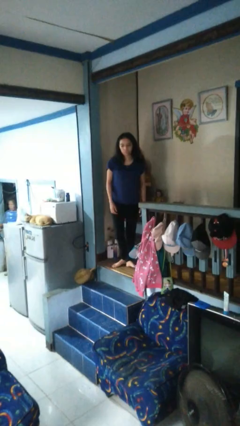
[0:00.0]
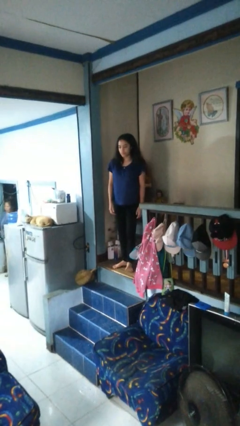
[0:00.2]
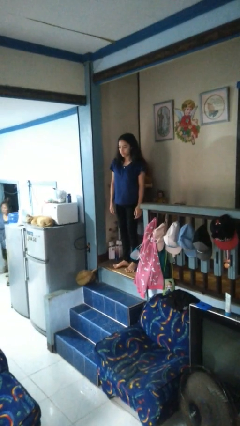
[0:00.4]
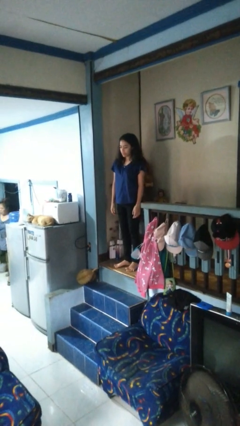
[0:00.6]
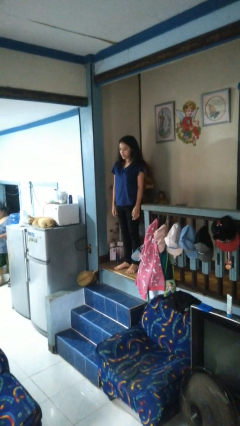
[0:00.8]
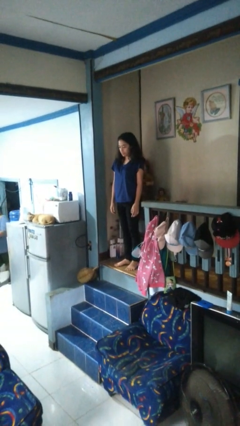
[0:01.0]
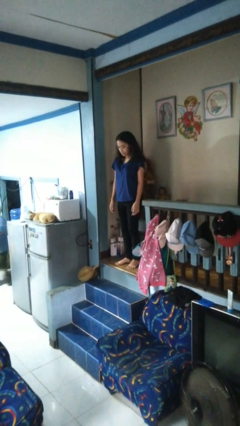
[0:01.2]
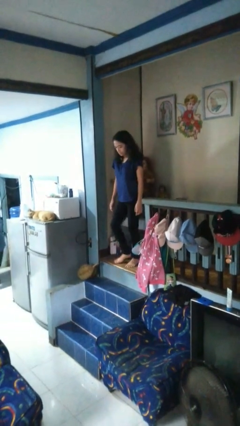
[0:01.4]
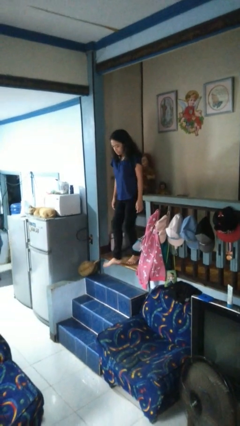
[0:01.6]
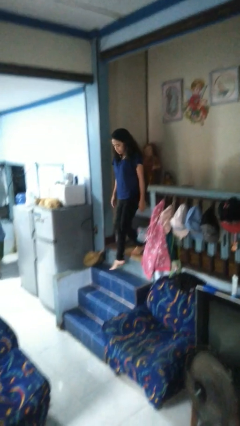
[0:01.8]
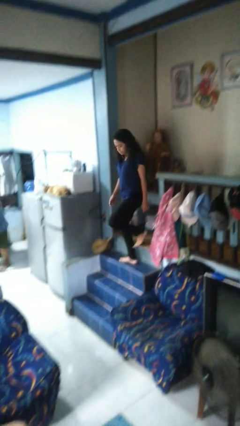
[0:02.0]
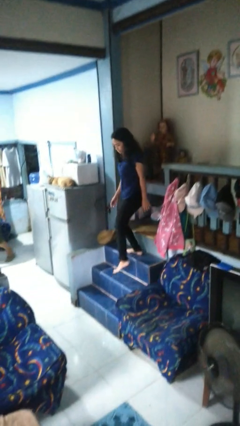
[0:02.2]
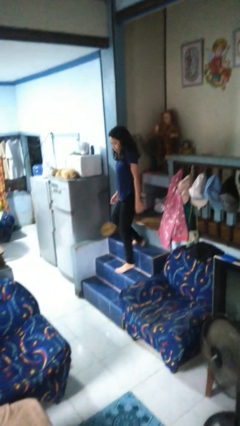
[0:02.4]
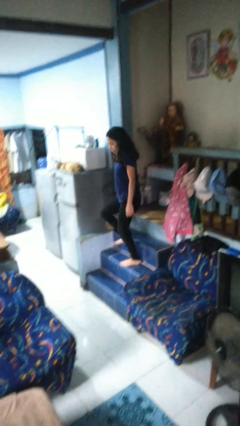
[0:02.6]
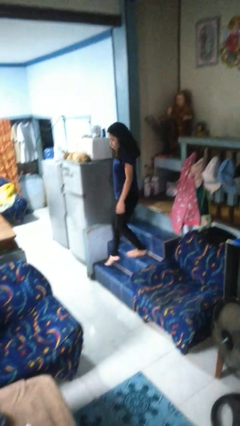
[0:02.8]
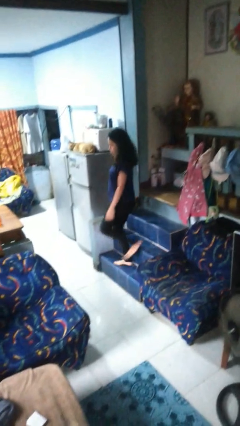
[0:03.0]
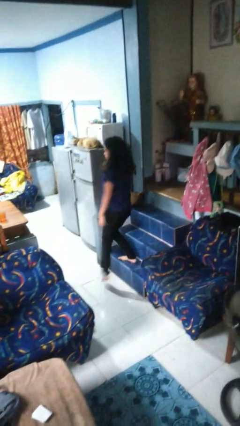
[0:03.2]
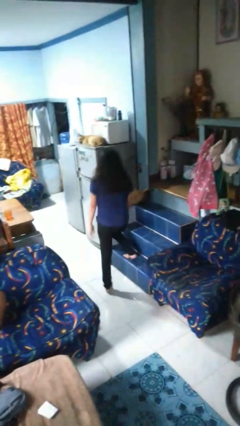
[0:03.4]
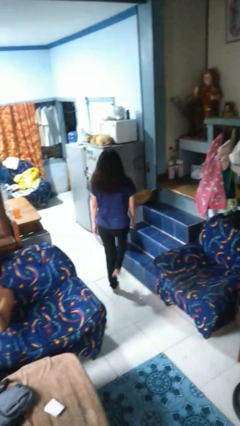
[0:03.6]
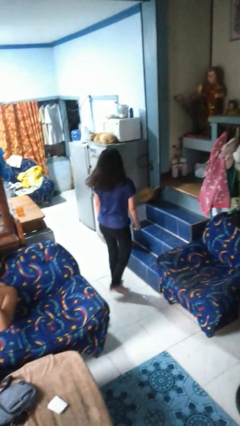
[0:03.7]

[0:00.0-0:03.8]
person climbs down stairs

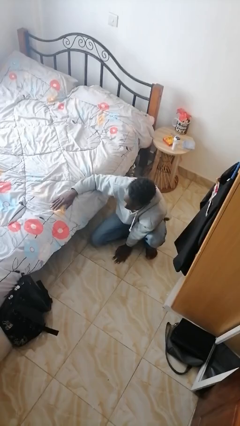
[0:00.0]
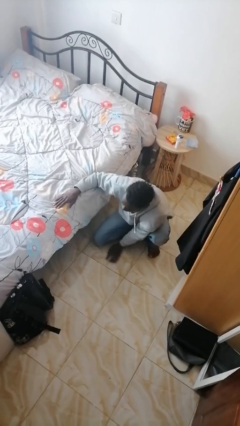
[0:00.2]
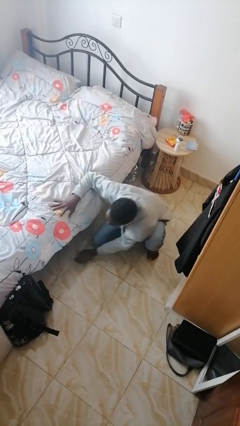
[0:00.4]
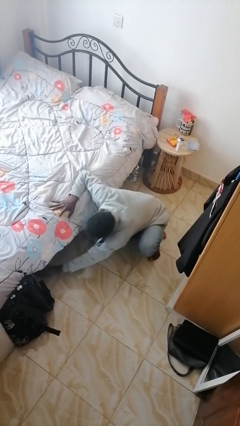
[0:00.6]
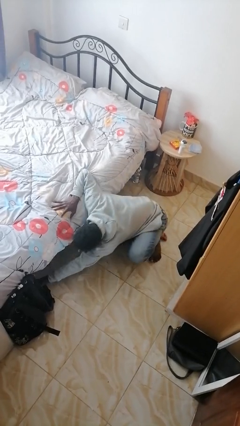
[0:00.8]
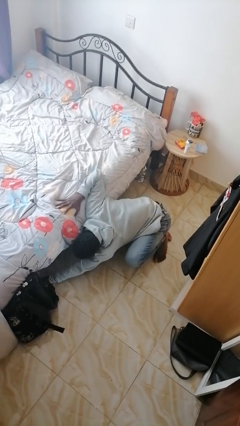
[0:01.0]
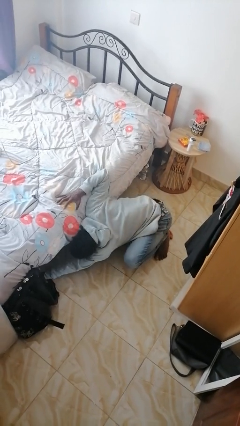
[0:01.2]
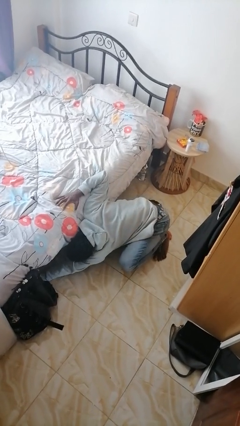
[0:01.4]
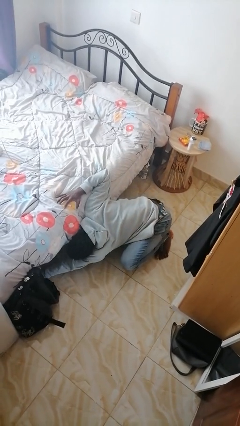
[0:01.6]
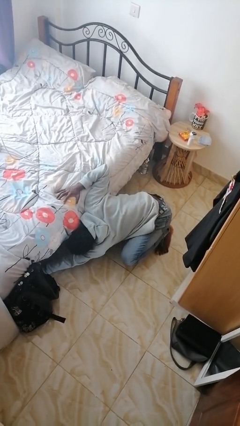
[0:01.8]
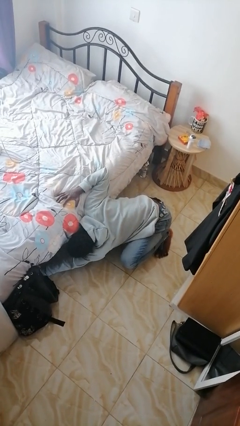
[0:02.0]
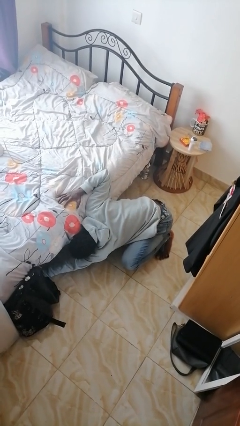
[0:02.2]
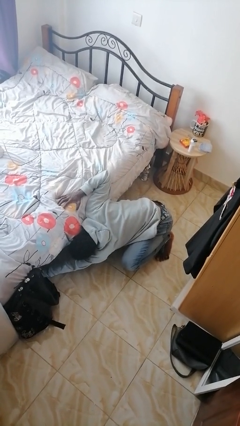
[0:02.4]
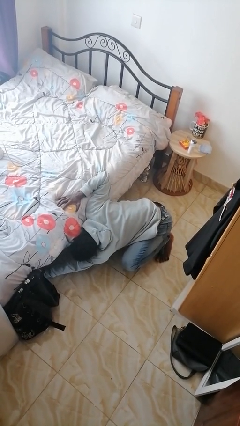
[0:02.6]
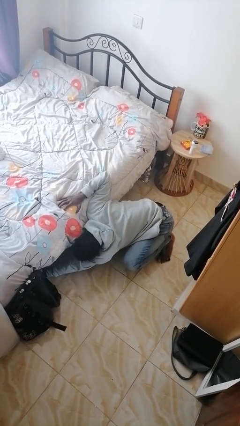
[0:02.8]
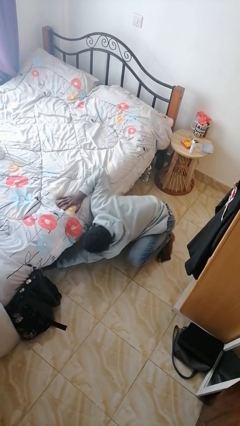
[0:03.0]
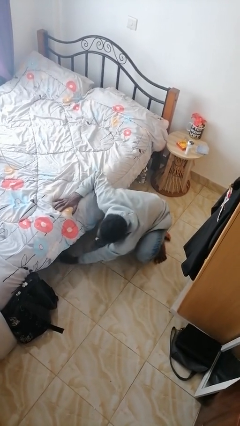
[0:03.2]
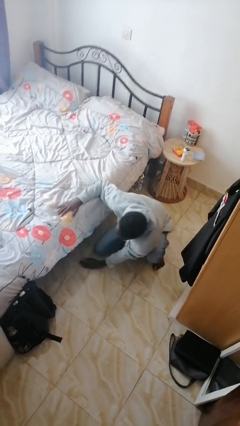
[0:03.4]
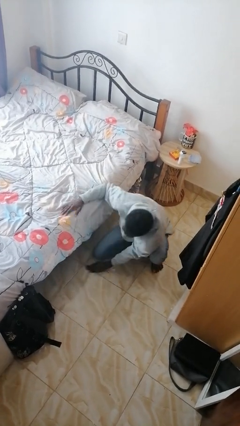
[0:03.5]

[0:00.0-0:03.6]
person searches under bed

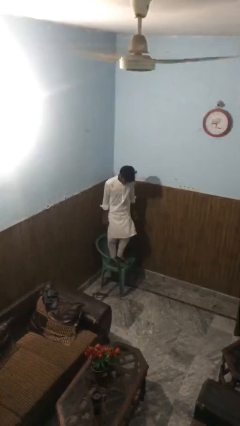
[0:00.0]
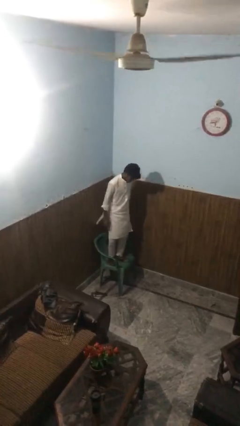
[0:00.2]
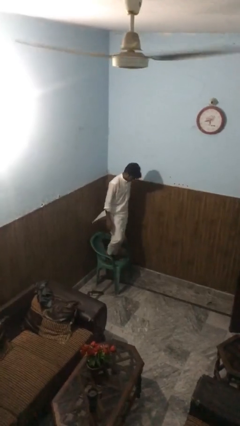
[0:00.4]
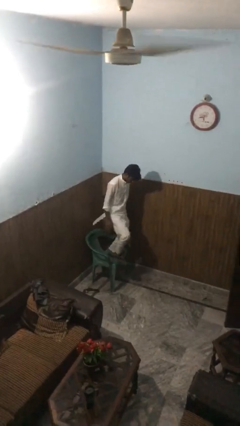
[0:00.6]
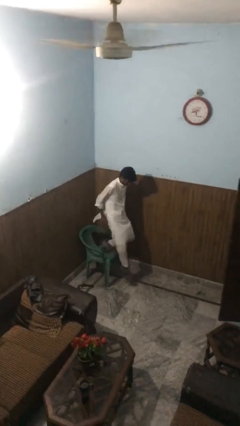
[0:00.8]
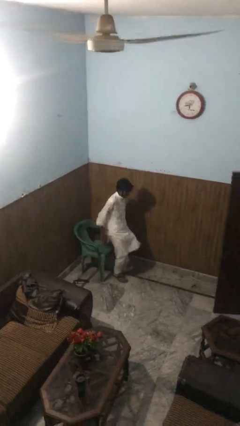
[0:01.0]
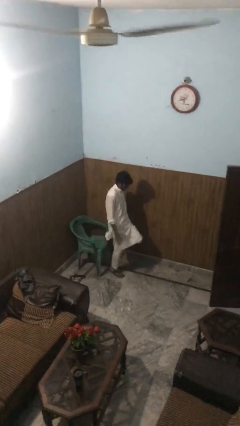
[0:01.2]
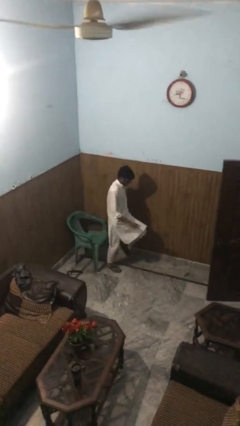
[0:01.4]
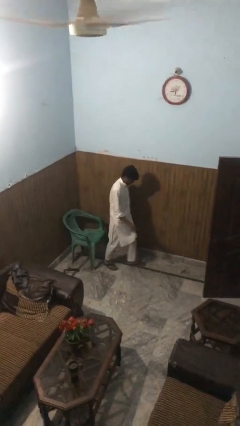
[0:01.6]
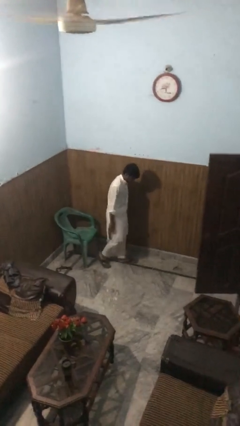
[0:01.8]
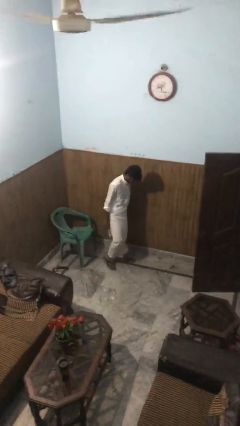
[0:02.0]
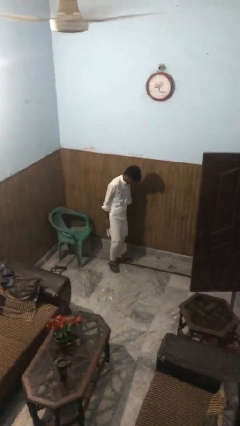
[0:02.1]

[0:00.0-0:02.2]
person climbs off chair

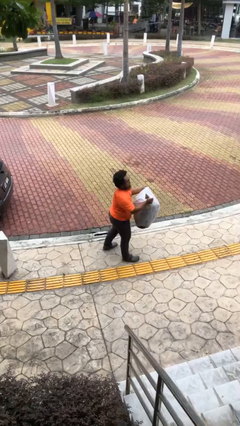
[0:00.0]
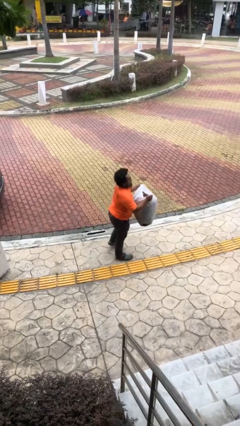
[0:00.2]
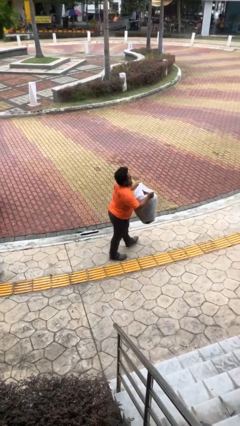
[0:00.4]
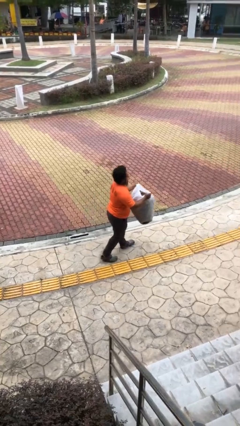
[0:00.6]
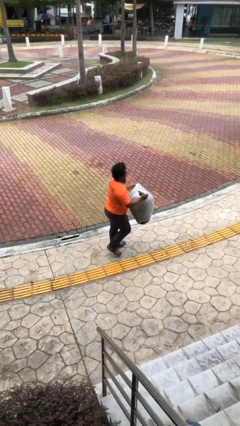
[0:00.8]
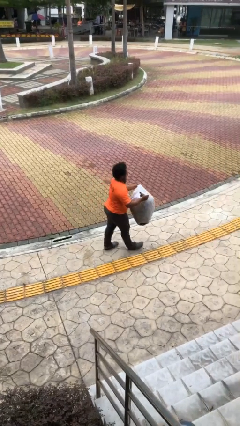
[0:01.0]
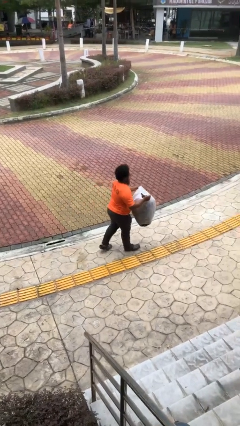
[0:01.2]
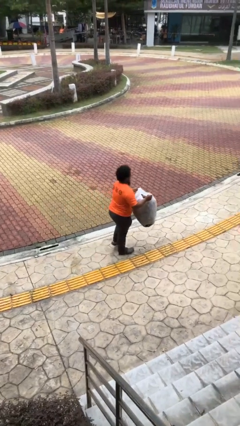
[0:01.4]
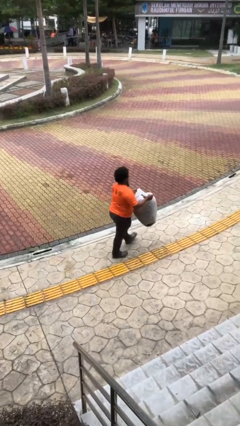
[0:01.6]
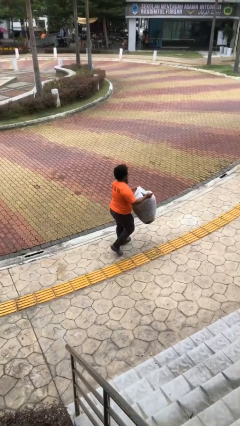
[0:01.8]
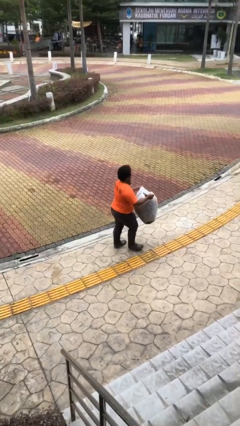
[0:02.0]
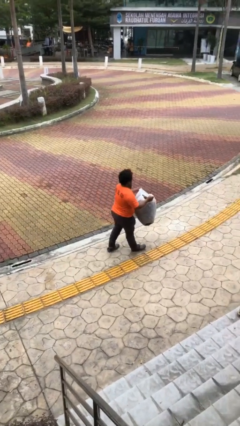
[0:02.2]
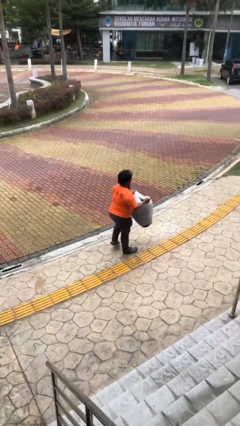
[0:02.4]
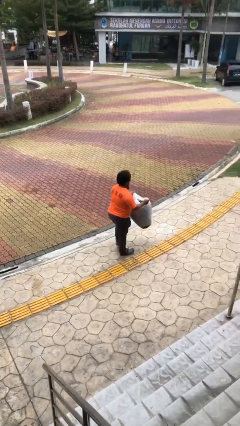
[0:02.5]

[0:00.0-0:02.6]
person carries heavy object

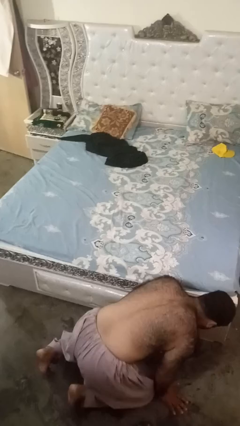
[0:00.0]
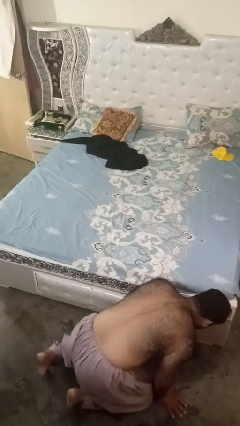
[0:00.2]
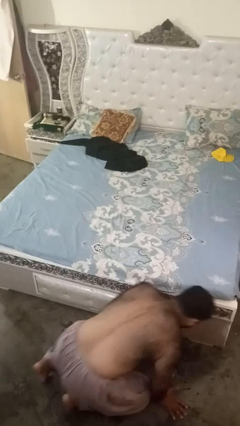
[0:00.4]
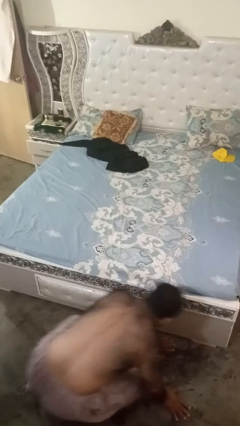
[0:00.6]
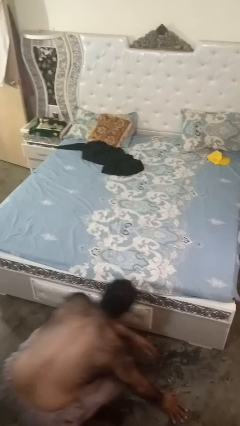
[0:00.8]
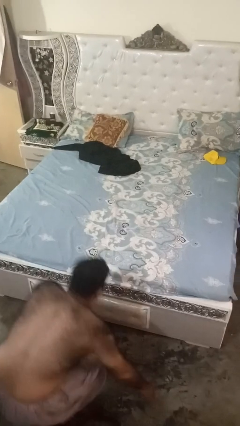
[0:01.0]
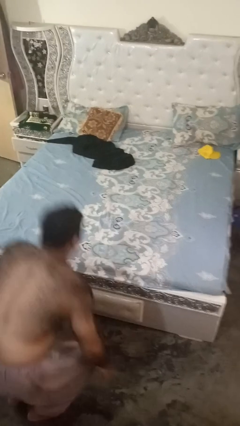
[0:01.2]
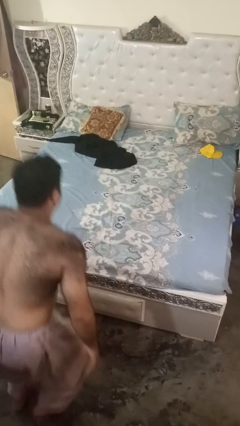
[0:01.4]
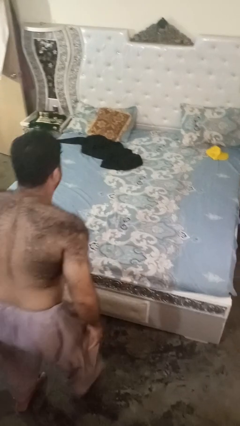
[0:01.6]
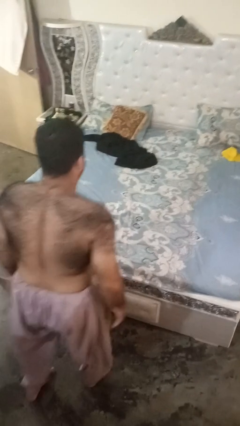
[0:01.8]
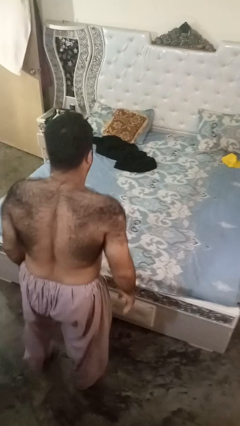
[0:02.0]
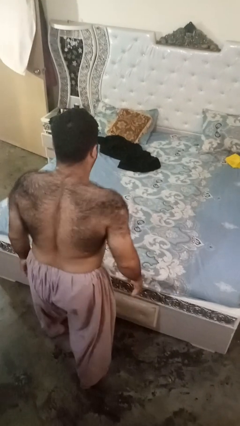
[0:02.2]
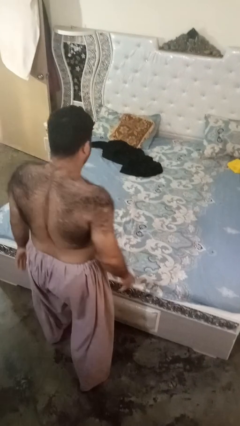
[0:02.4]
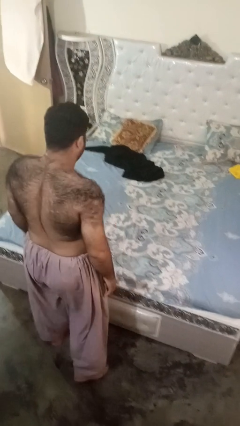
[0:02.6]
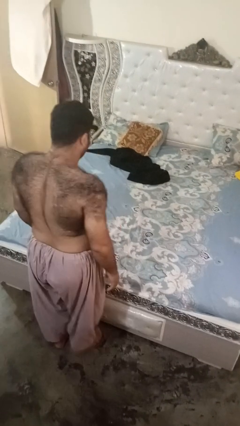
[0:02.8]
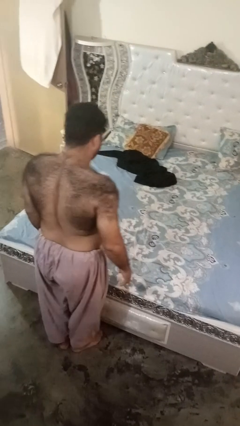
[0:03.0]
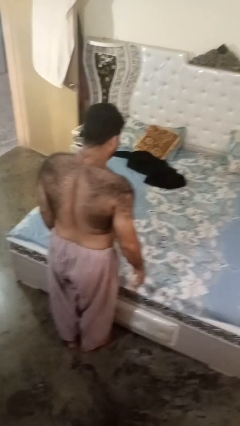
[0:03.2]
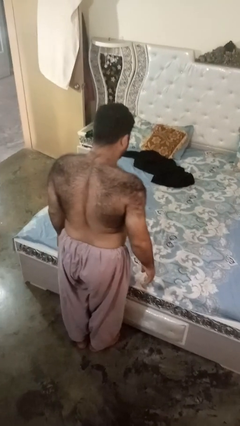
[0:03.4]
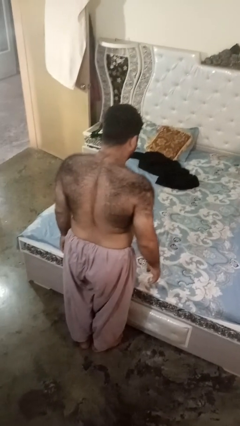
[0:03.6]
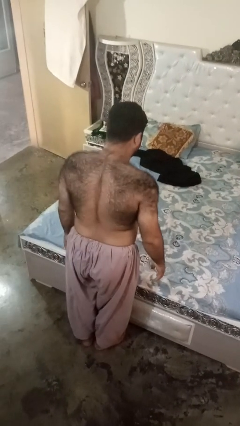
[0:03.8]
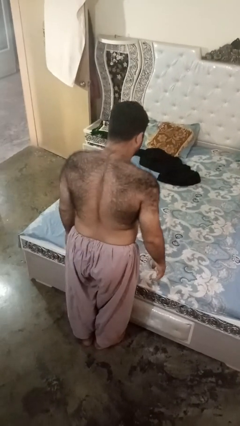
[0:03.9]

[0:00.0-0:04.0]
person stands up from floor

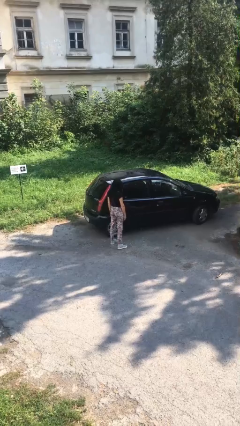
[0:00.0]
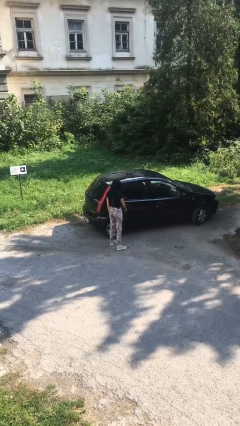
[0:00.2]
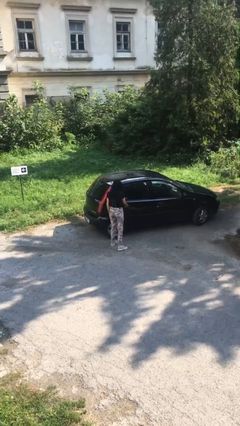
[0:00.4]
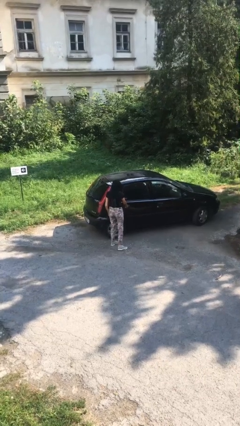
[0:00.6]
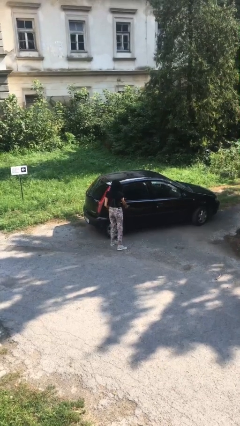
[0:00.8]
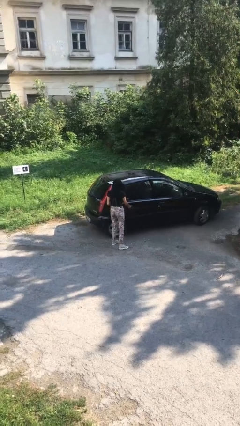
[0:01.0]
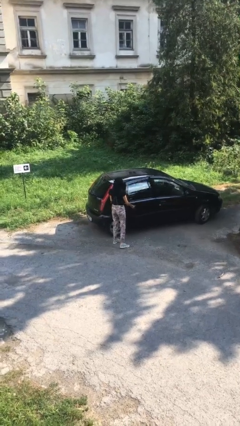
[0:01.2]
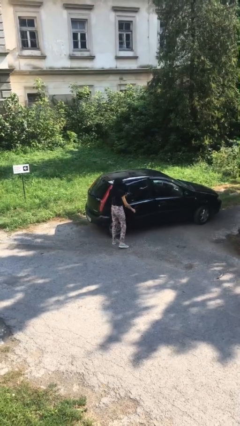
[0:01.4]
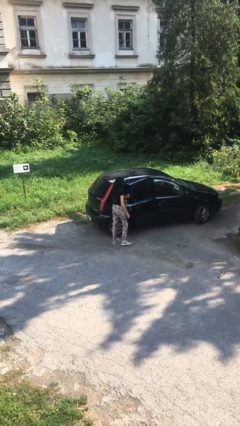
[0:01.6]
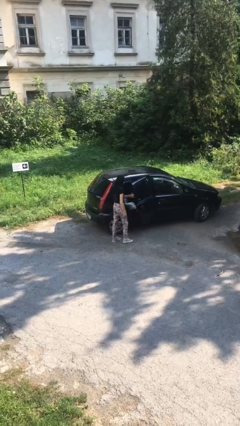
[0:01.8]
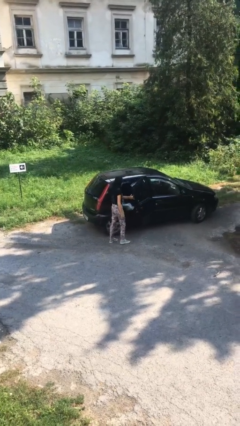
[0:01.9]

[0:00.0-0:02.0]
person opens car door
